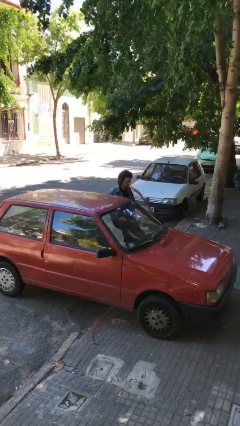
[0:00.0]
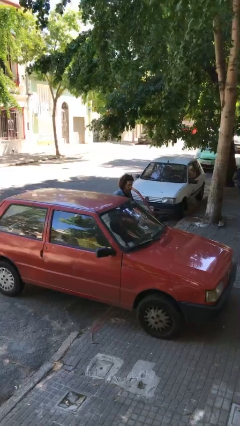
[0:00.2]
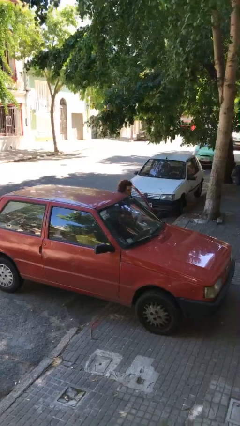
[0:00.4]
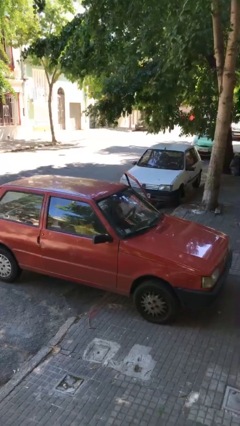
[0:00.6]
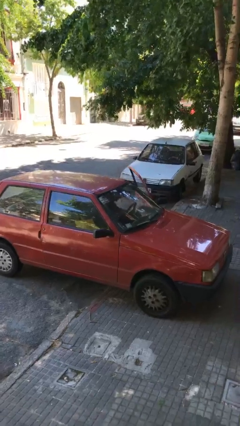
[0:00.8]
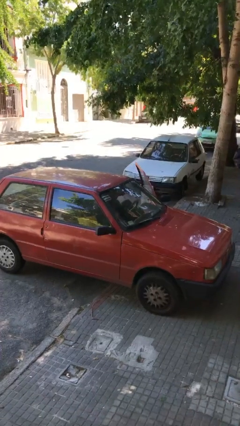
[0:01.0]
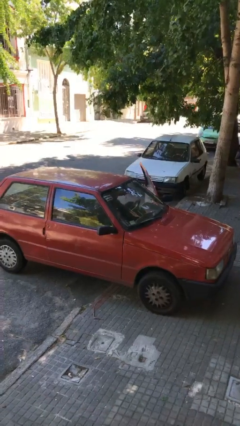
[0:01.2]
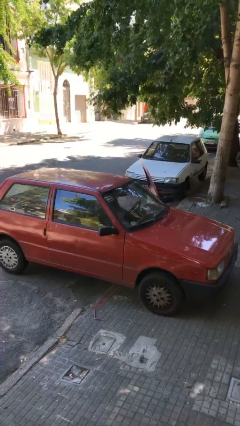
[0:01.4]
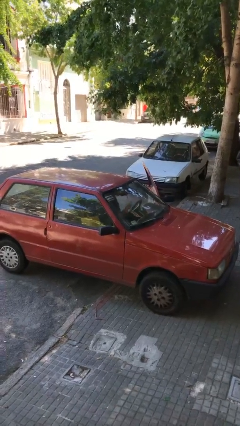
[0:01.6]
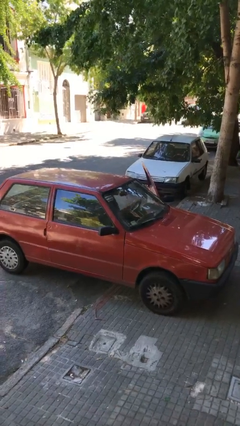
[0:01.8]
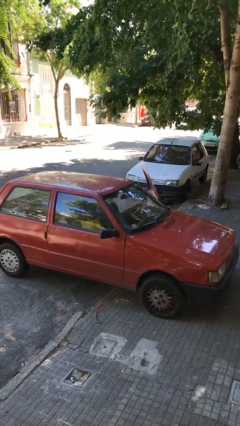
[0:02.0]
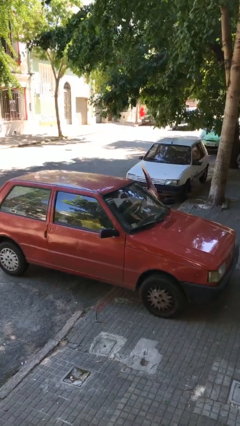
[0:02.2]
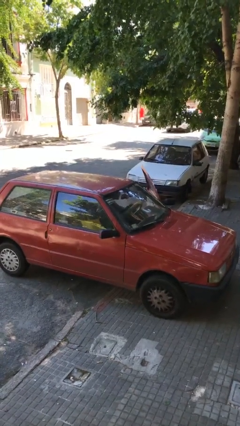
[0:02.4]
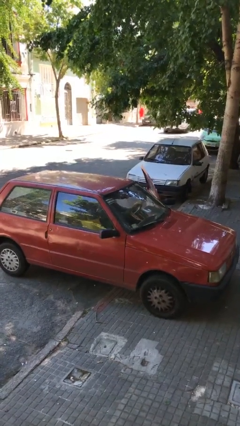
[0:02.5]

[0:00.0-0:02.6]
person enters car

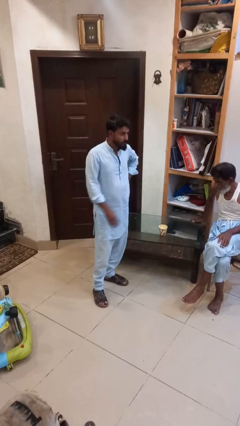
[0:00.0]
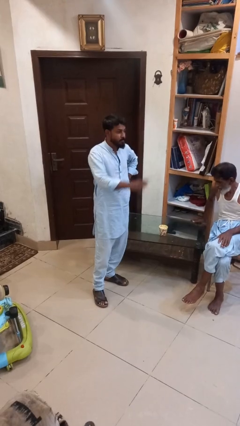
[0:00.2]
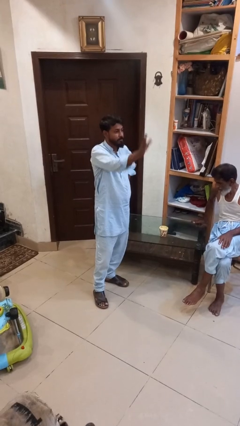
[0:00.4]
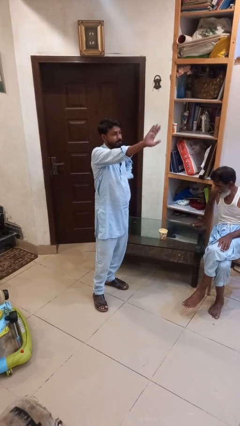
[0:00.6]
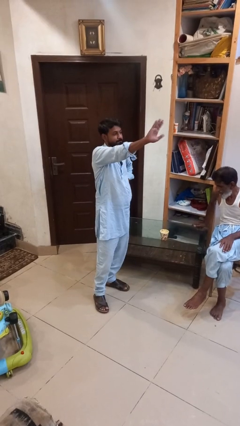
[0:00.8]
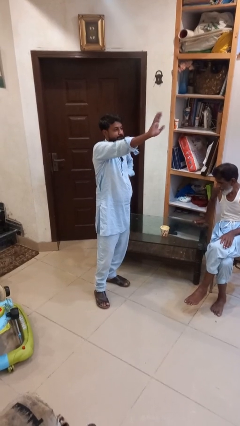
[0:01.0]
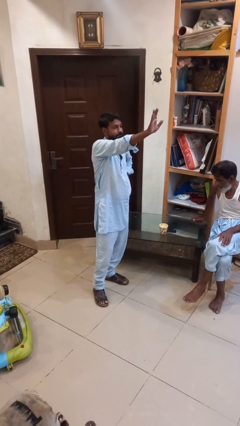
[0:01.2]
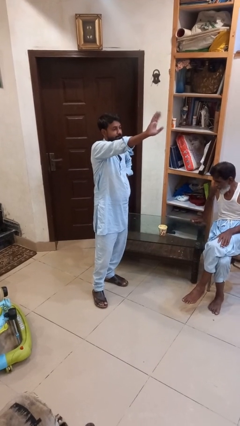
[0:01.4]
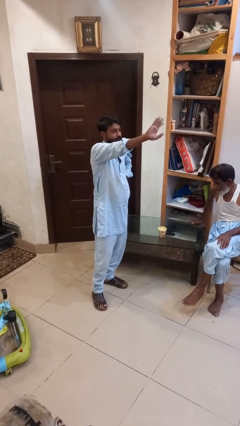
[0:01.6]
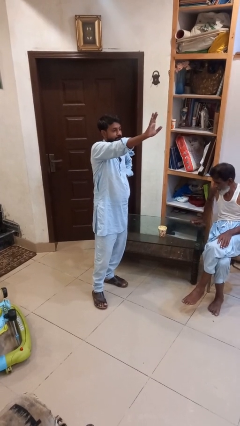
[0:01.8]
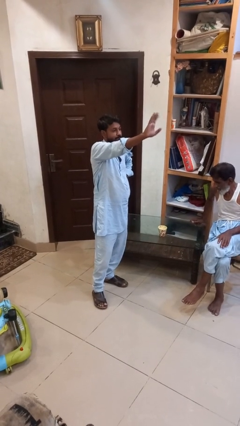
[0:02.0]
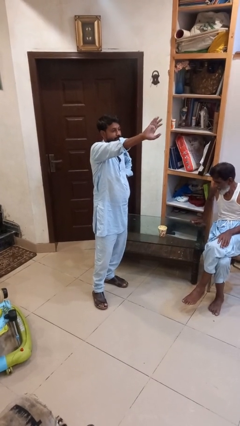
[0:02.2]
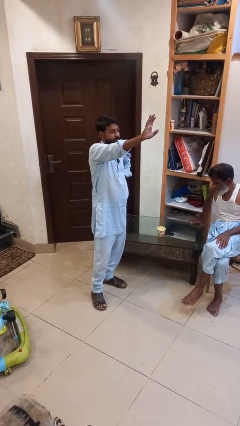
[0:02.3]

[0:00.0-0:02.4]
person waves at person

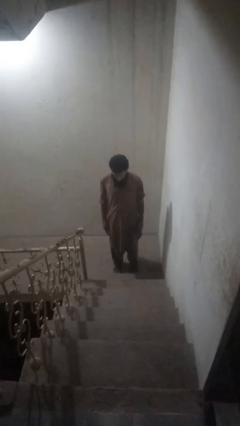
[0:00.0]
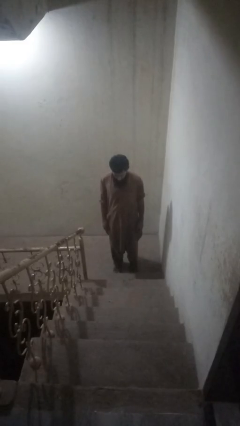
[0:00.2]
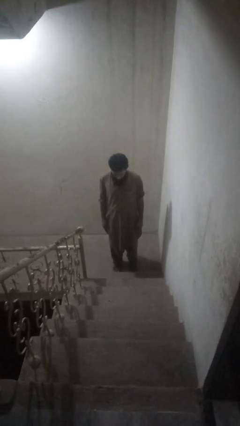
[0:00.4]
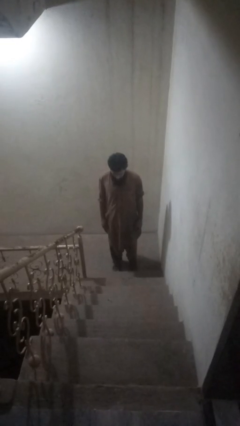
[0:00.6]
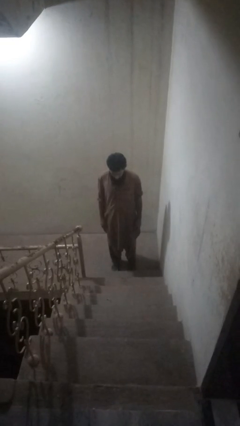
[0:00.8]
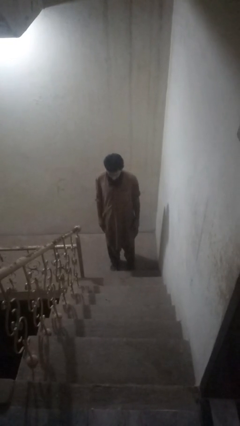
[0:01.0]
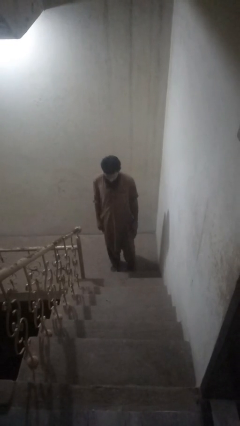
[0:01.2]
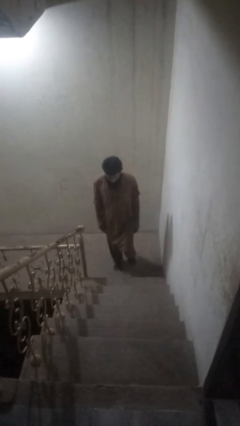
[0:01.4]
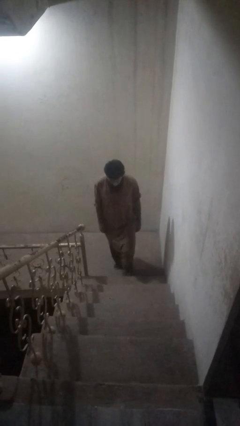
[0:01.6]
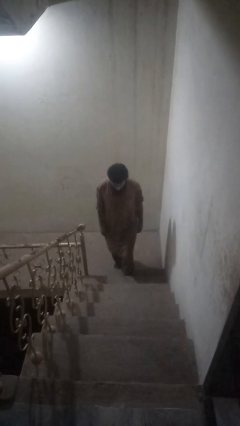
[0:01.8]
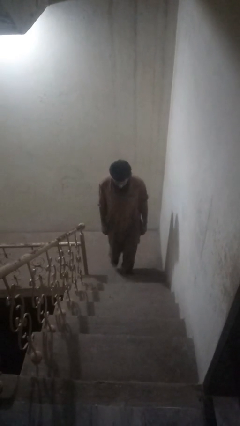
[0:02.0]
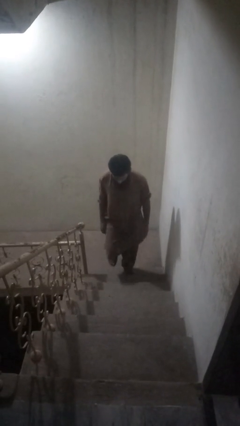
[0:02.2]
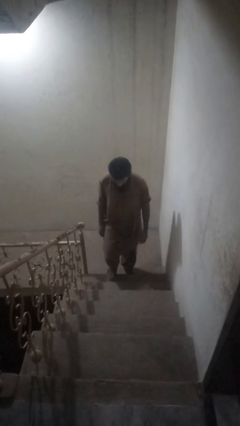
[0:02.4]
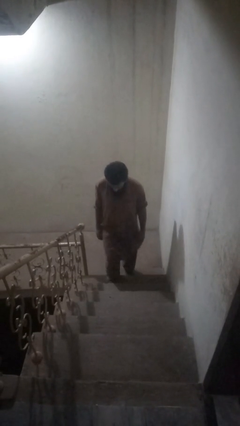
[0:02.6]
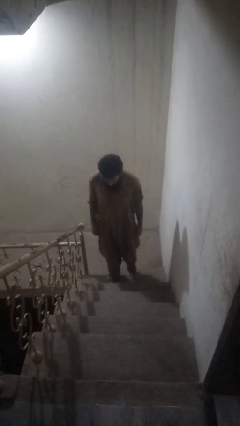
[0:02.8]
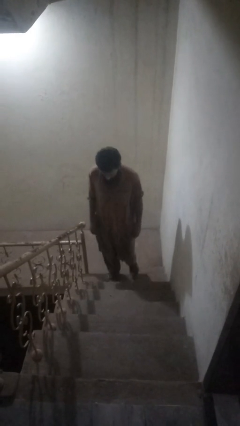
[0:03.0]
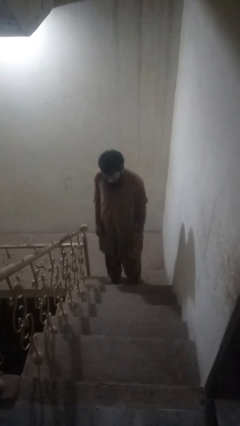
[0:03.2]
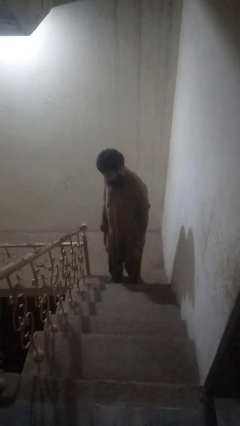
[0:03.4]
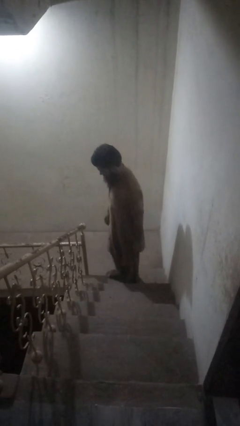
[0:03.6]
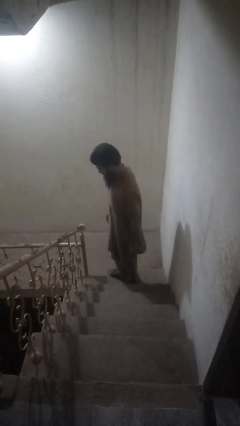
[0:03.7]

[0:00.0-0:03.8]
person climbs up stairs

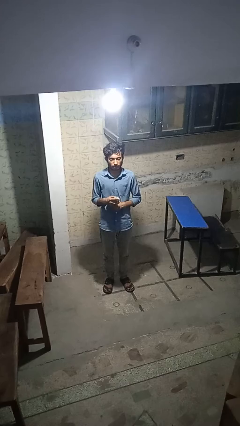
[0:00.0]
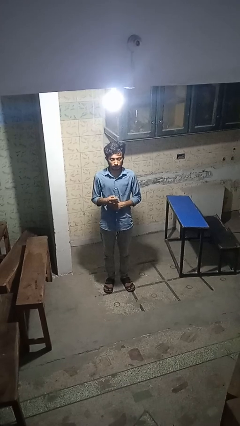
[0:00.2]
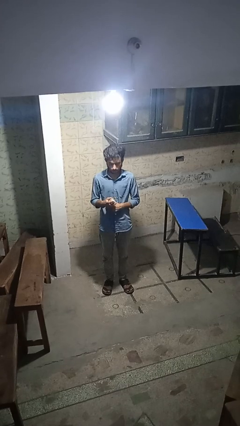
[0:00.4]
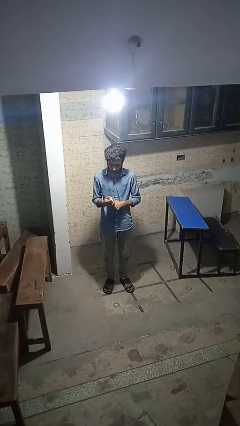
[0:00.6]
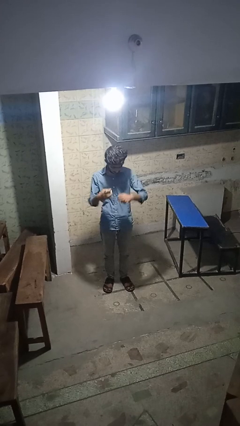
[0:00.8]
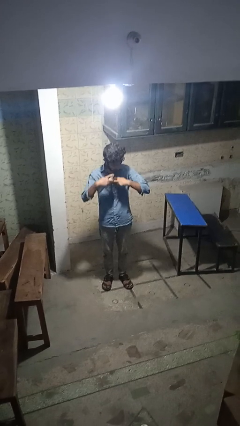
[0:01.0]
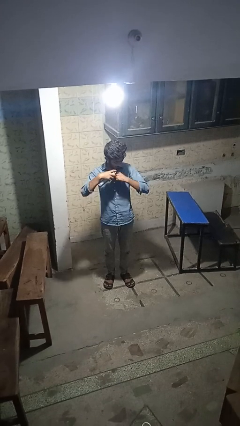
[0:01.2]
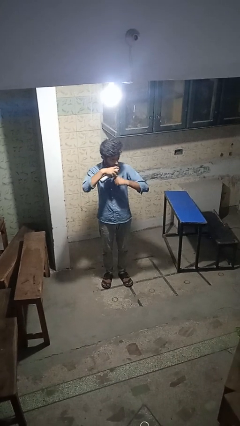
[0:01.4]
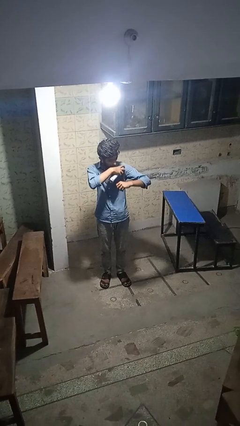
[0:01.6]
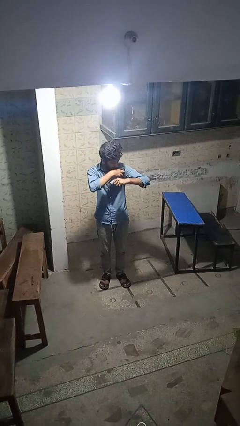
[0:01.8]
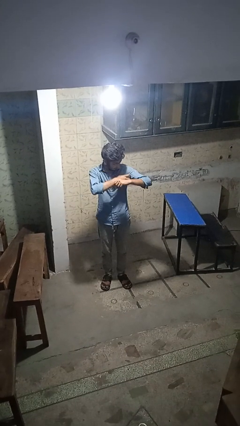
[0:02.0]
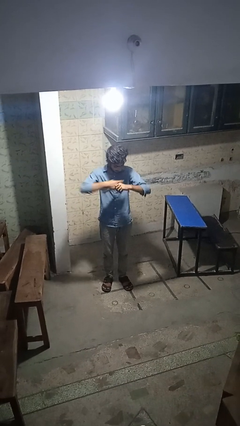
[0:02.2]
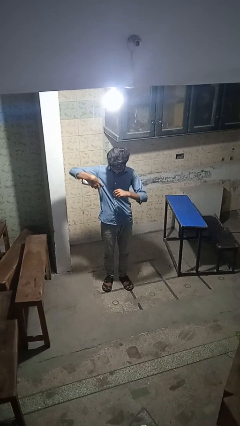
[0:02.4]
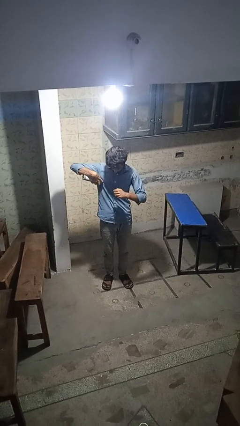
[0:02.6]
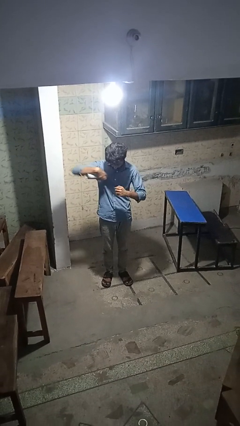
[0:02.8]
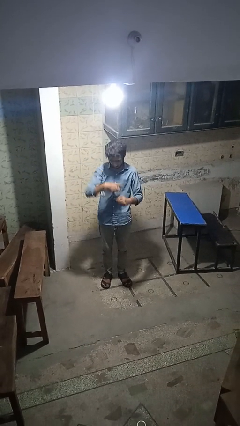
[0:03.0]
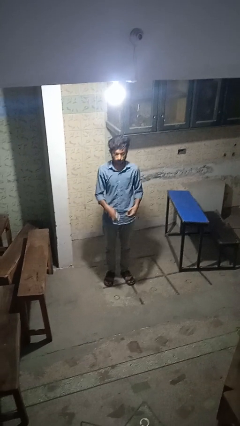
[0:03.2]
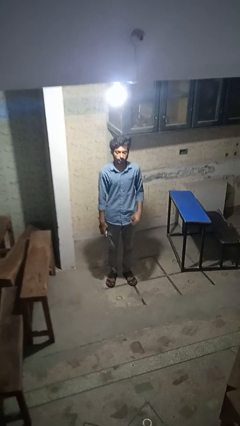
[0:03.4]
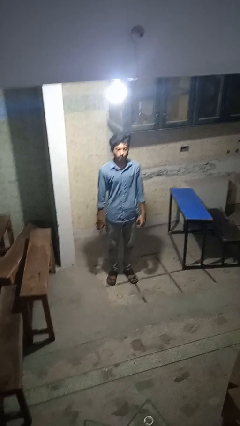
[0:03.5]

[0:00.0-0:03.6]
person applies deodorant

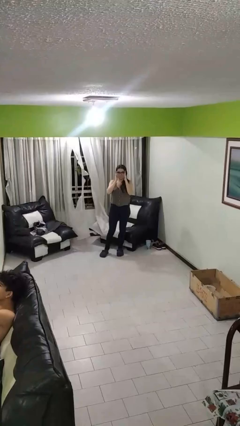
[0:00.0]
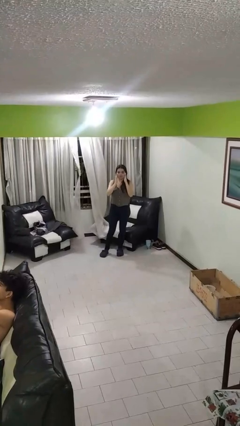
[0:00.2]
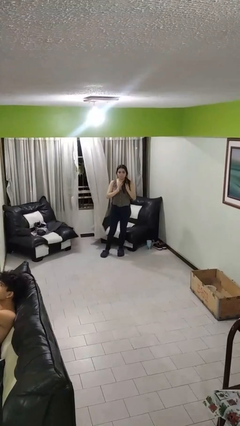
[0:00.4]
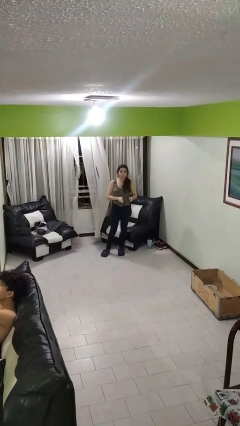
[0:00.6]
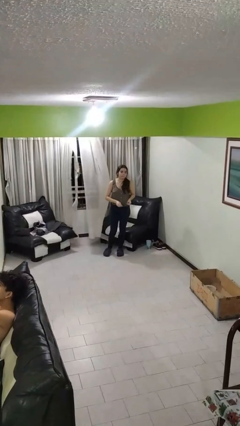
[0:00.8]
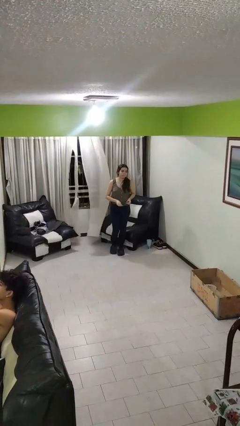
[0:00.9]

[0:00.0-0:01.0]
person takes off glasses

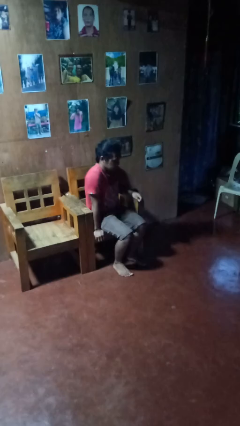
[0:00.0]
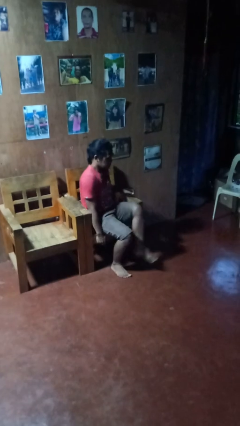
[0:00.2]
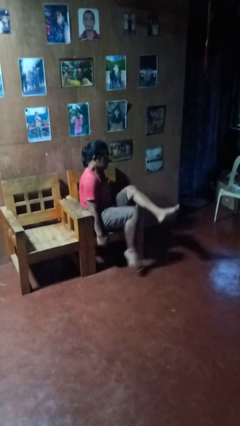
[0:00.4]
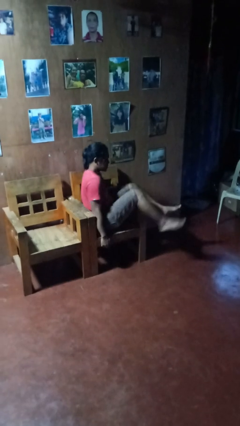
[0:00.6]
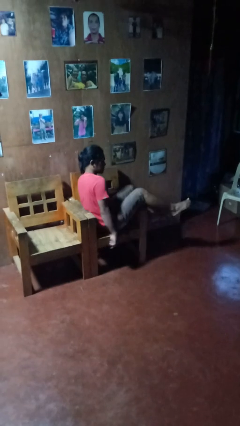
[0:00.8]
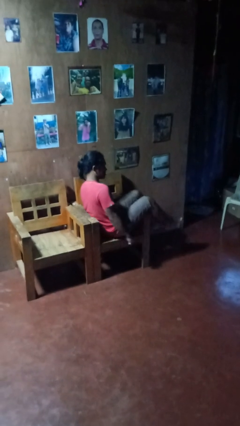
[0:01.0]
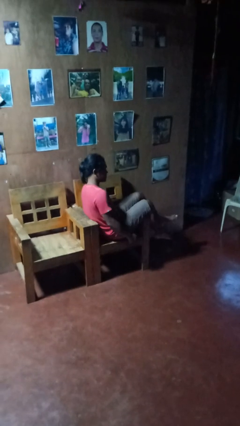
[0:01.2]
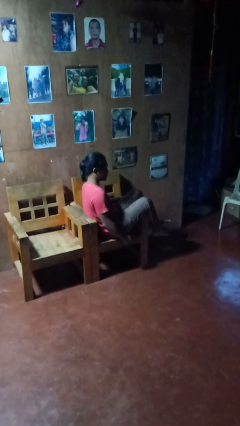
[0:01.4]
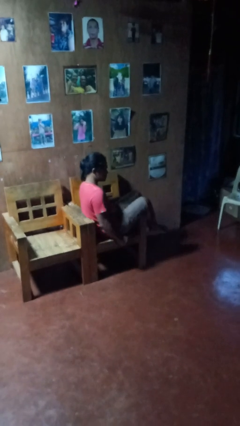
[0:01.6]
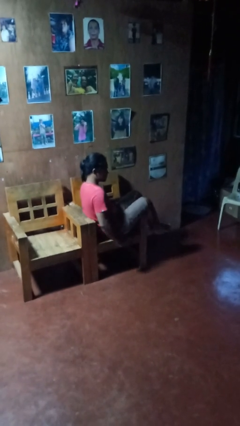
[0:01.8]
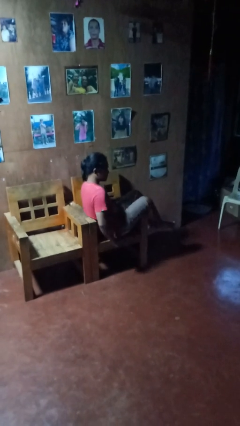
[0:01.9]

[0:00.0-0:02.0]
person sits down

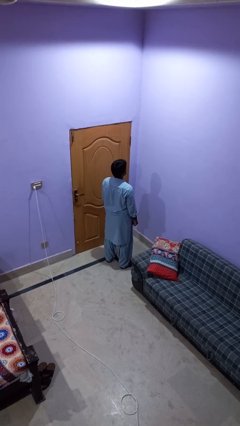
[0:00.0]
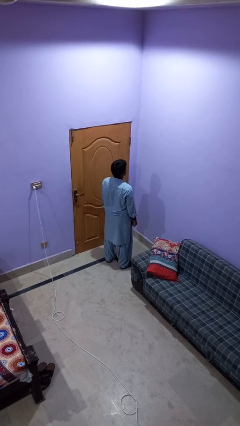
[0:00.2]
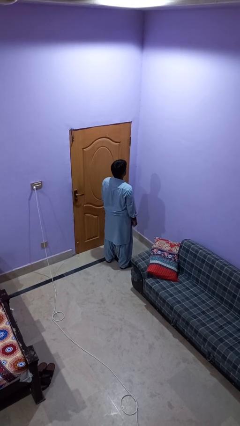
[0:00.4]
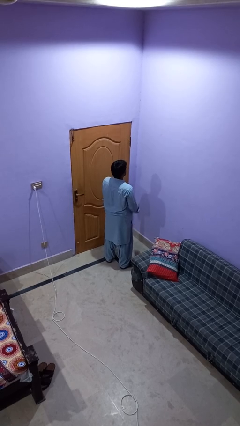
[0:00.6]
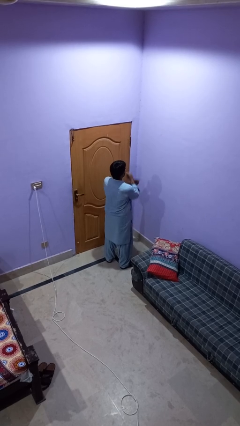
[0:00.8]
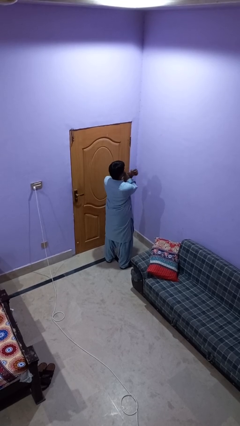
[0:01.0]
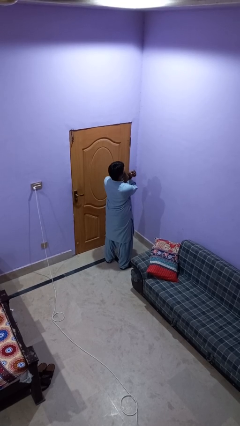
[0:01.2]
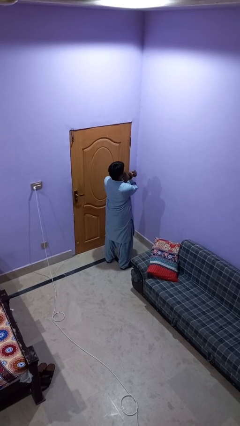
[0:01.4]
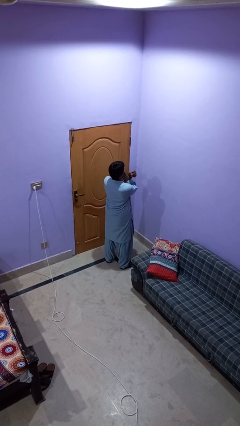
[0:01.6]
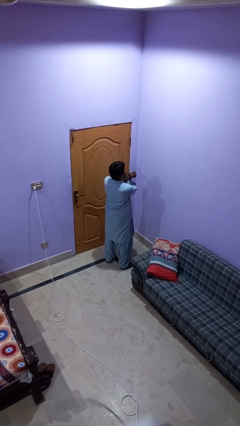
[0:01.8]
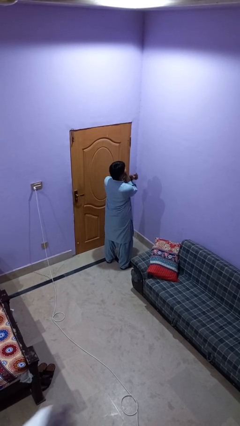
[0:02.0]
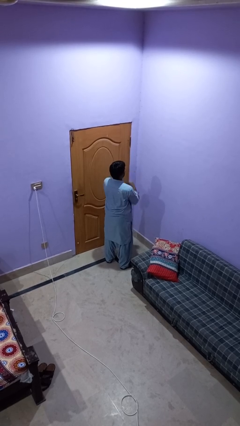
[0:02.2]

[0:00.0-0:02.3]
person gestures arms x
